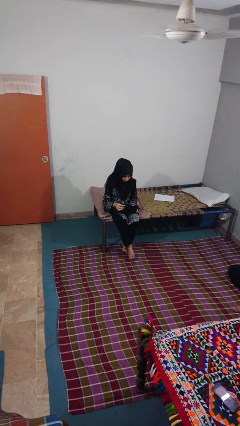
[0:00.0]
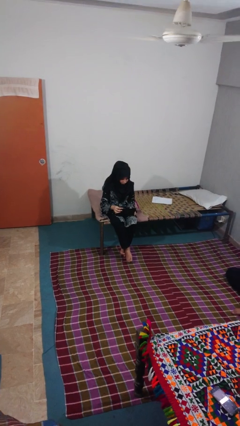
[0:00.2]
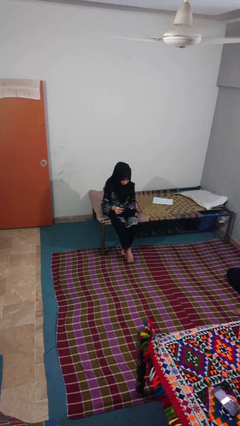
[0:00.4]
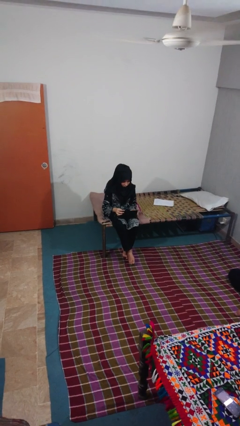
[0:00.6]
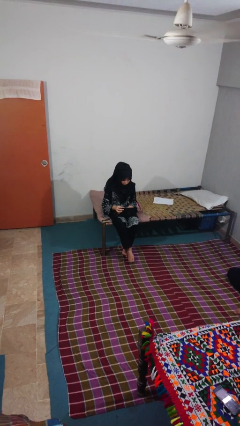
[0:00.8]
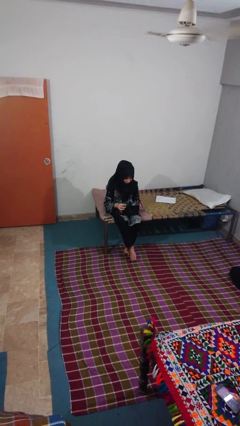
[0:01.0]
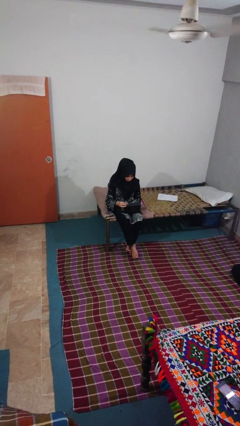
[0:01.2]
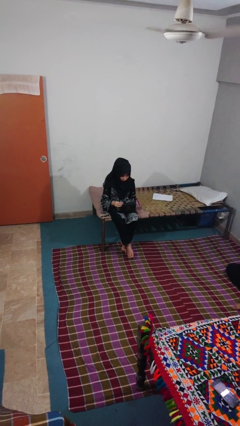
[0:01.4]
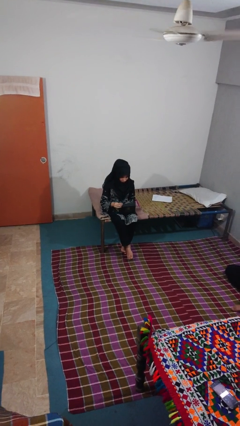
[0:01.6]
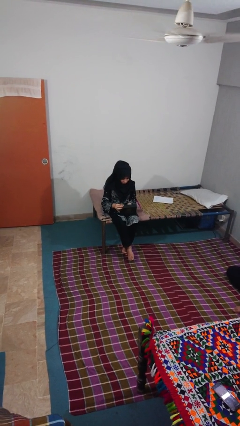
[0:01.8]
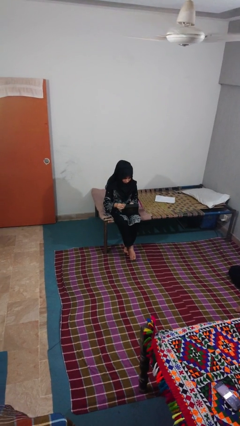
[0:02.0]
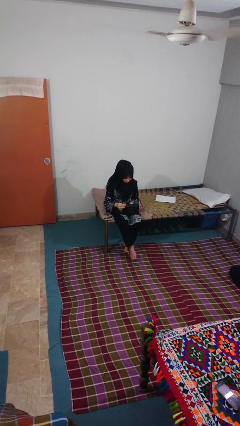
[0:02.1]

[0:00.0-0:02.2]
person searches jewelry box

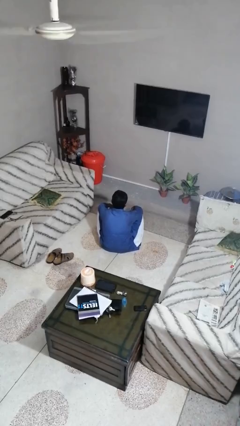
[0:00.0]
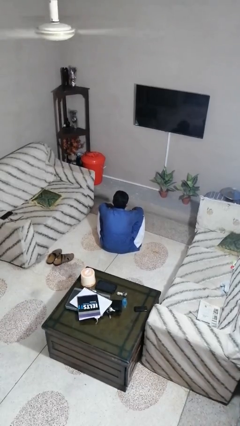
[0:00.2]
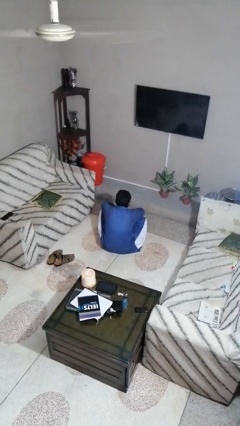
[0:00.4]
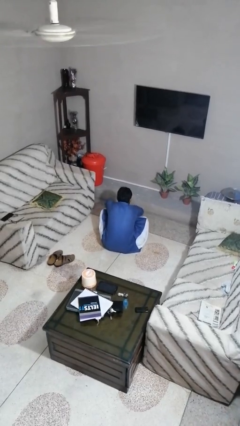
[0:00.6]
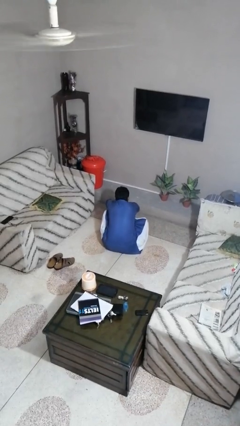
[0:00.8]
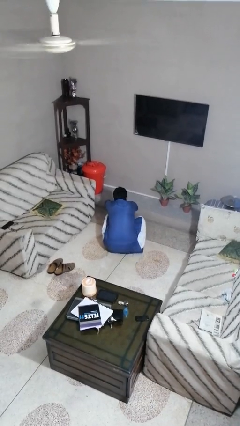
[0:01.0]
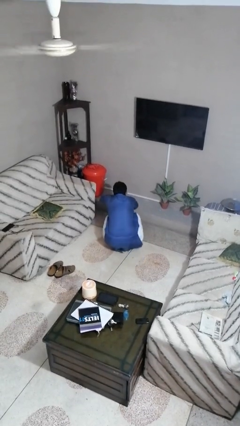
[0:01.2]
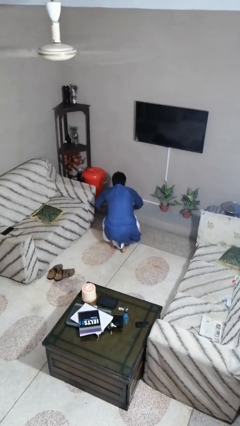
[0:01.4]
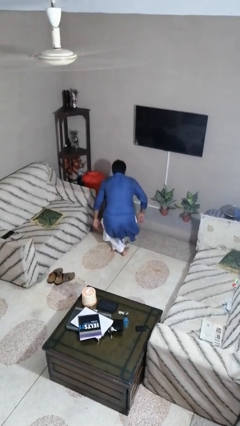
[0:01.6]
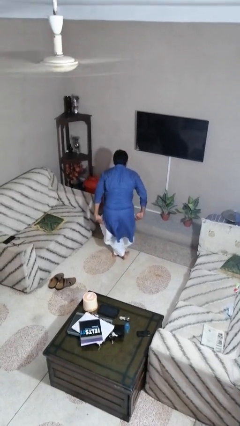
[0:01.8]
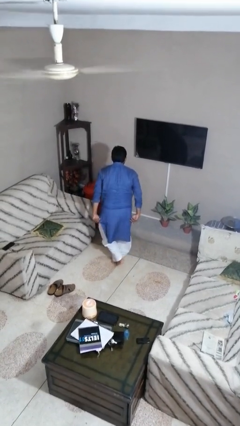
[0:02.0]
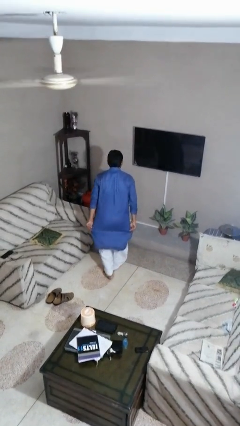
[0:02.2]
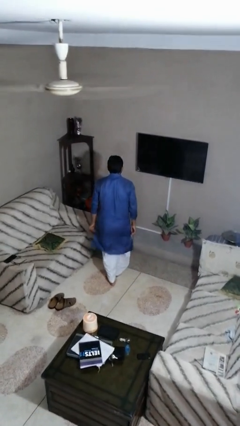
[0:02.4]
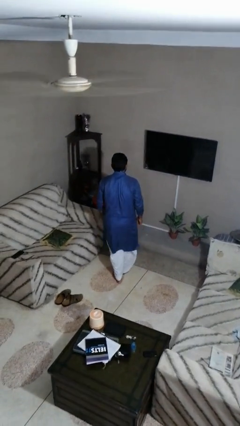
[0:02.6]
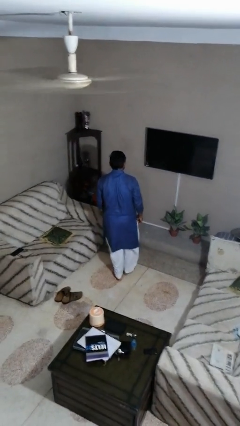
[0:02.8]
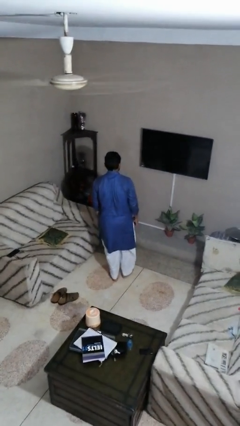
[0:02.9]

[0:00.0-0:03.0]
person stands up from floor

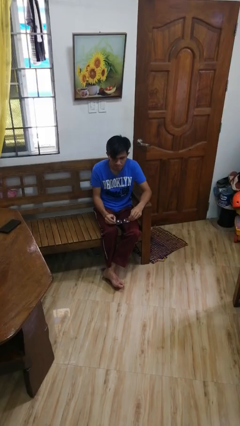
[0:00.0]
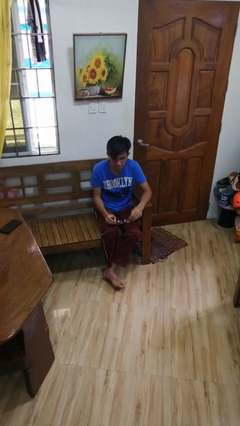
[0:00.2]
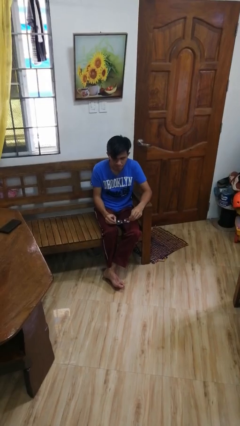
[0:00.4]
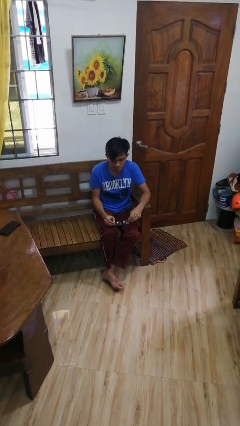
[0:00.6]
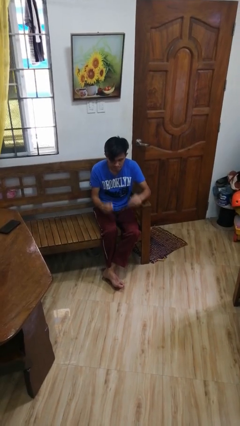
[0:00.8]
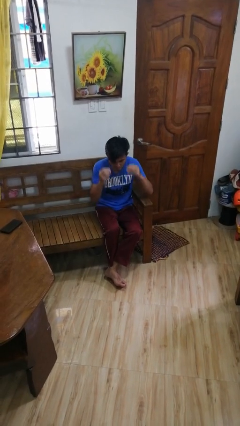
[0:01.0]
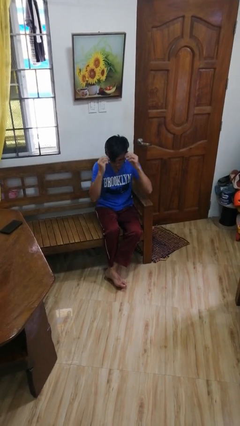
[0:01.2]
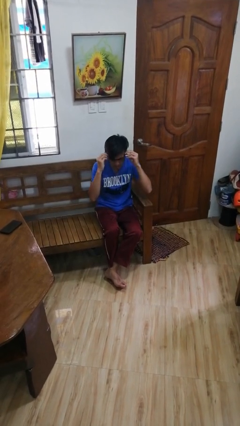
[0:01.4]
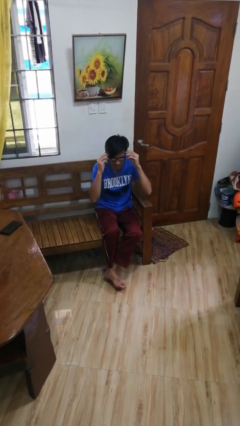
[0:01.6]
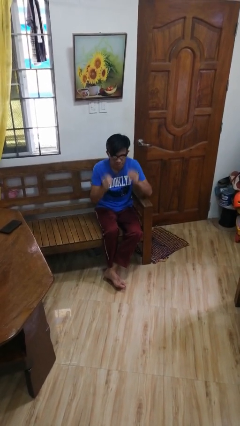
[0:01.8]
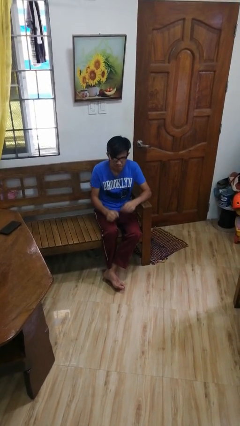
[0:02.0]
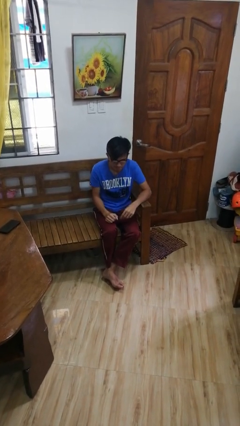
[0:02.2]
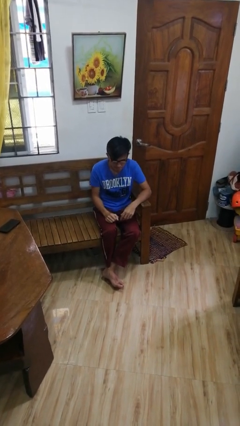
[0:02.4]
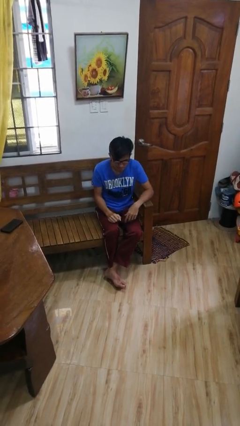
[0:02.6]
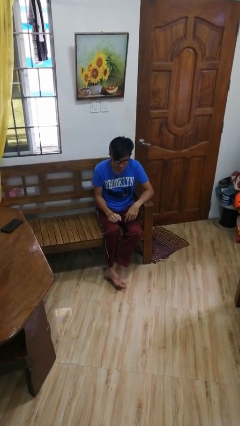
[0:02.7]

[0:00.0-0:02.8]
person puts on glasses

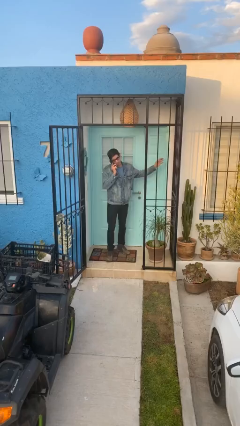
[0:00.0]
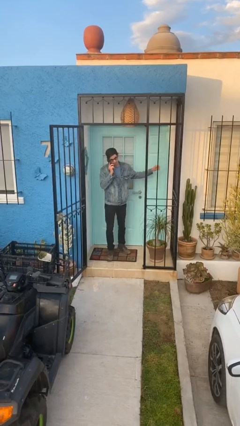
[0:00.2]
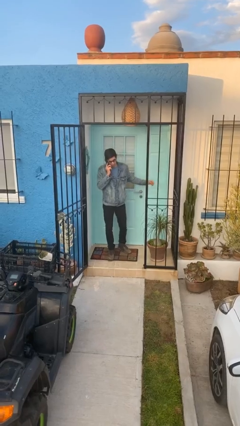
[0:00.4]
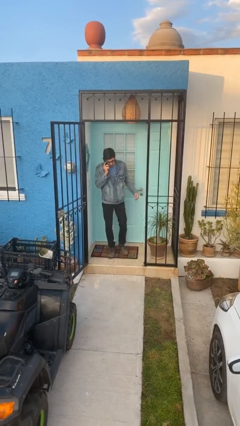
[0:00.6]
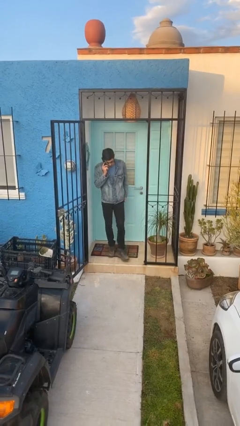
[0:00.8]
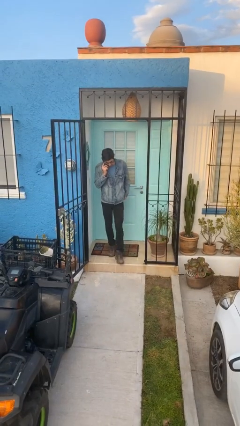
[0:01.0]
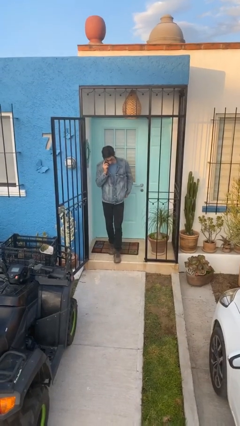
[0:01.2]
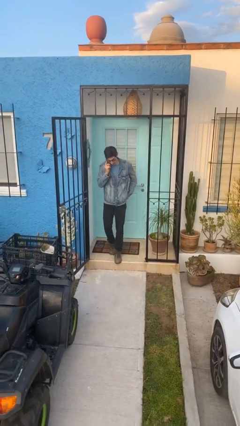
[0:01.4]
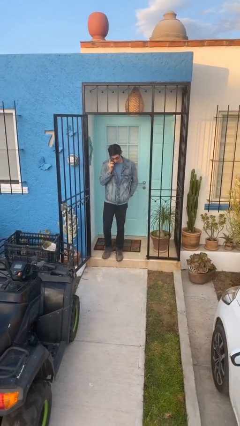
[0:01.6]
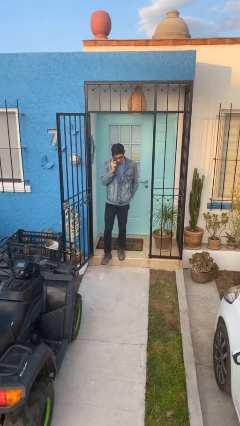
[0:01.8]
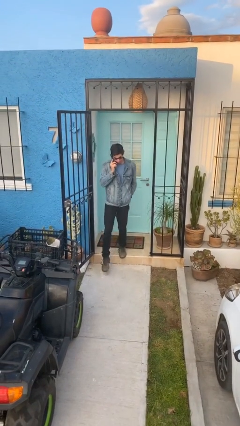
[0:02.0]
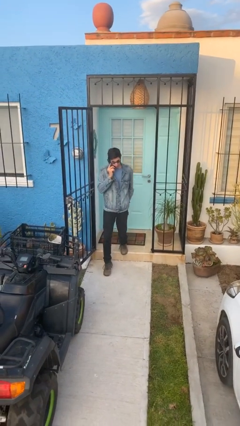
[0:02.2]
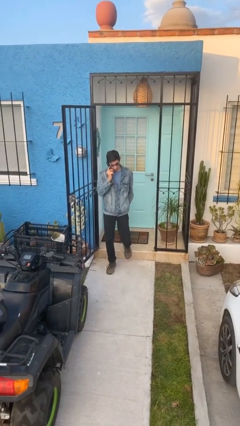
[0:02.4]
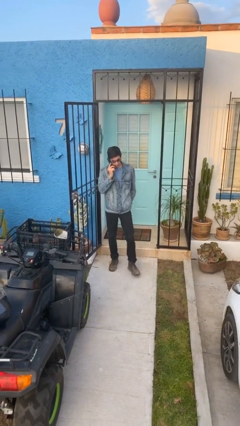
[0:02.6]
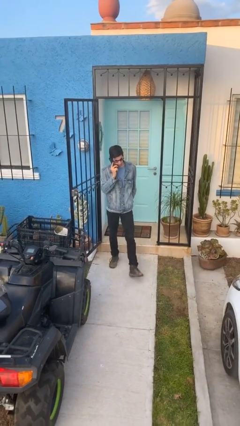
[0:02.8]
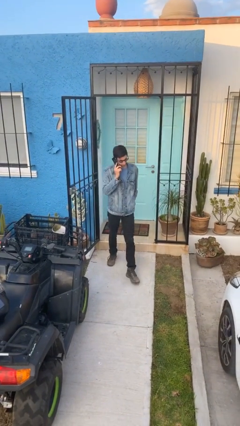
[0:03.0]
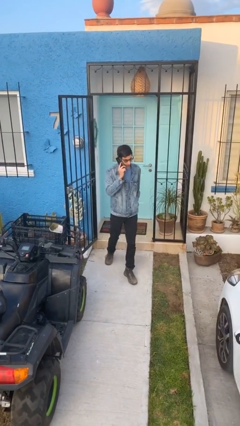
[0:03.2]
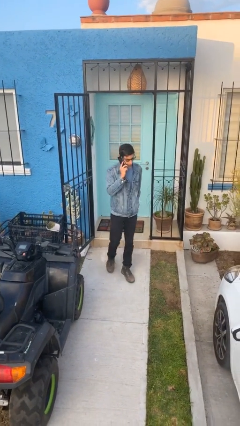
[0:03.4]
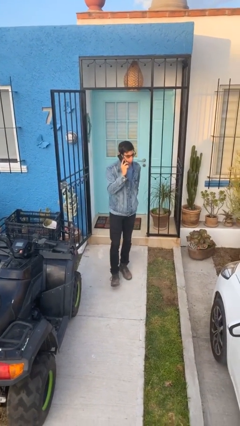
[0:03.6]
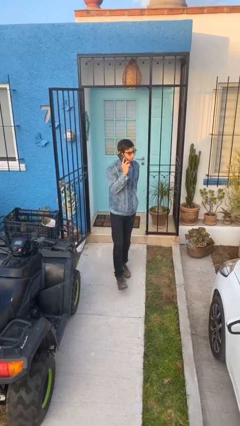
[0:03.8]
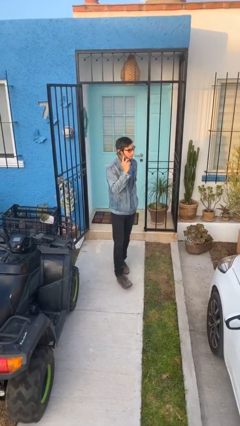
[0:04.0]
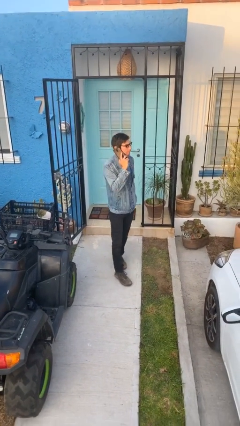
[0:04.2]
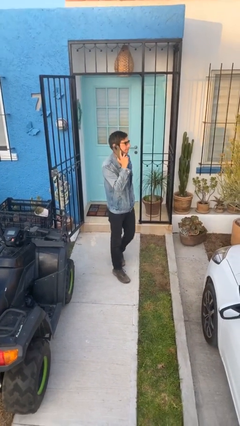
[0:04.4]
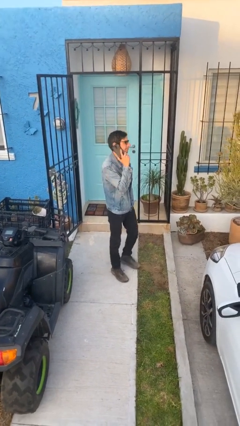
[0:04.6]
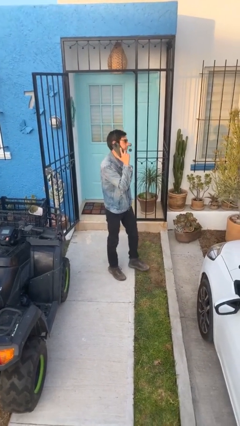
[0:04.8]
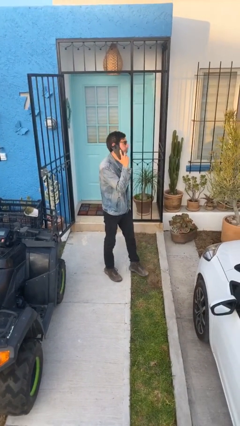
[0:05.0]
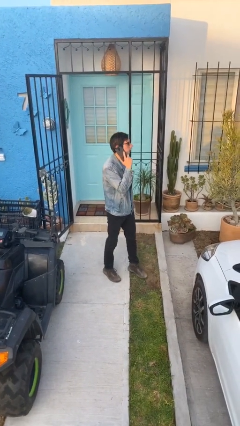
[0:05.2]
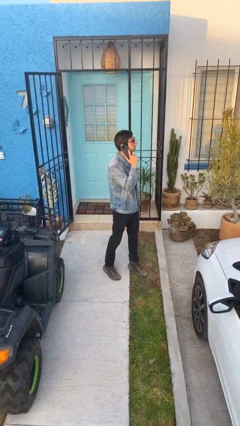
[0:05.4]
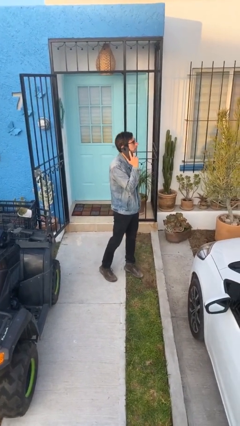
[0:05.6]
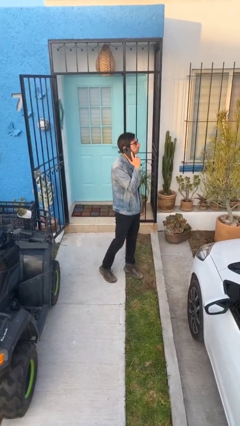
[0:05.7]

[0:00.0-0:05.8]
person enters scene through structure

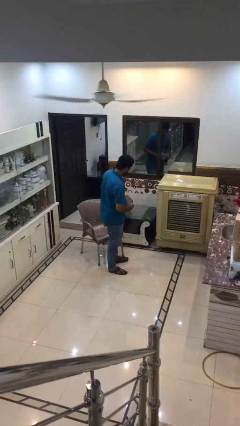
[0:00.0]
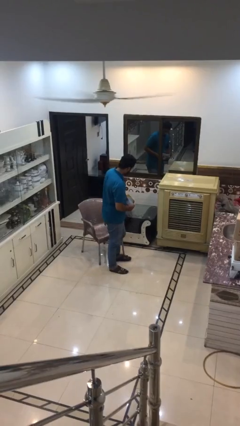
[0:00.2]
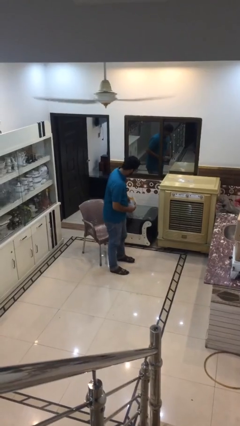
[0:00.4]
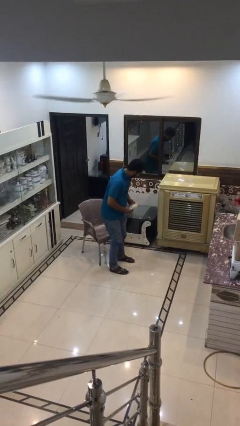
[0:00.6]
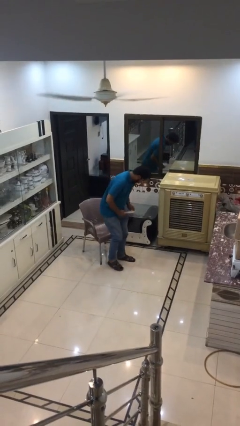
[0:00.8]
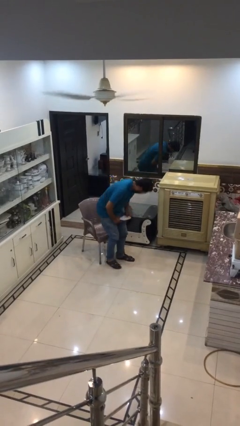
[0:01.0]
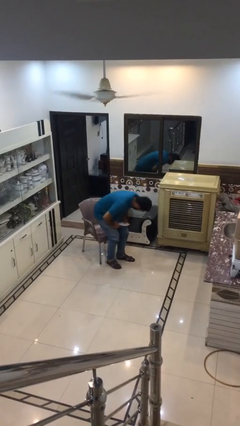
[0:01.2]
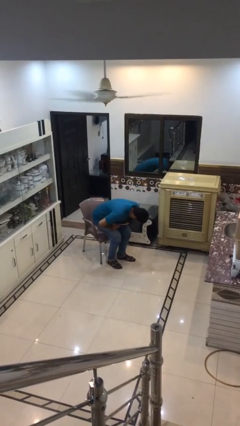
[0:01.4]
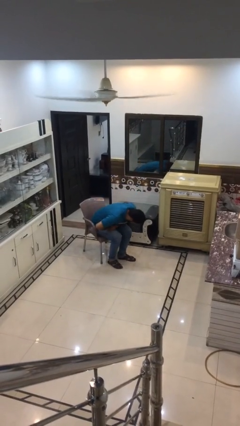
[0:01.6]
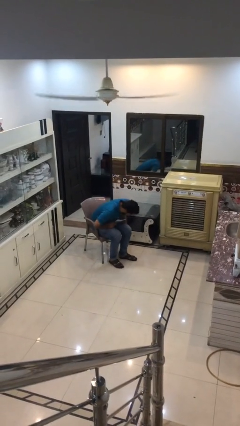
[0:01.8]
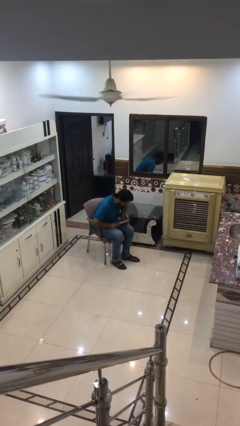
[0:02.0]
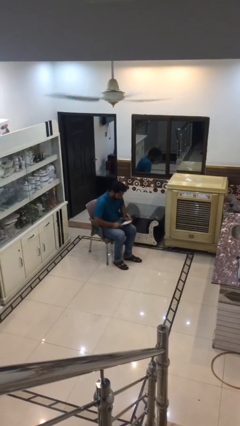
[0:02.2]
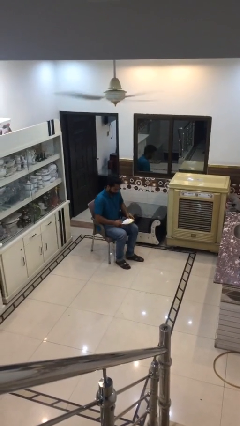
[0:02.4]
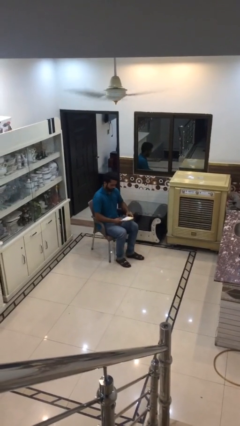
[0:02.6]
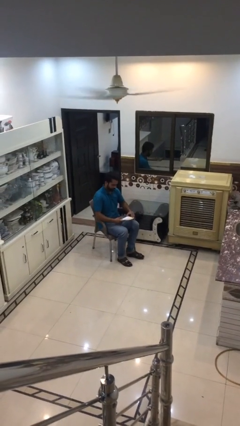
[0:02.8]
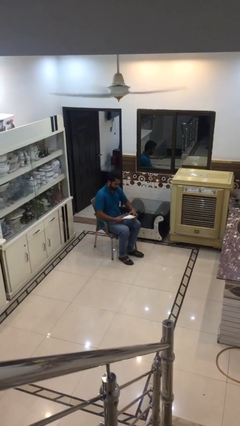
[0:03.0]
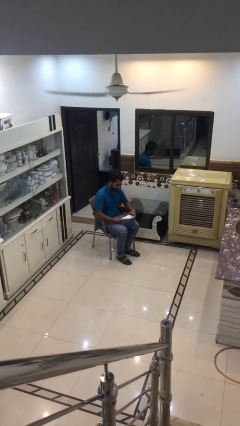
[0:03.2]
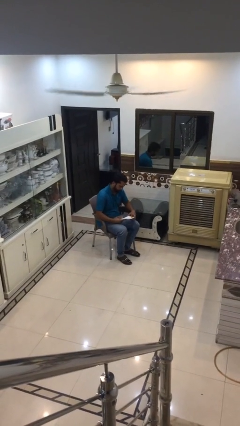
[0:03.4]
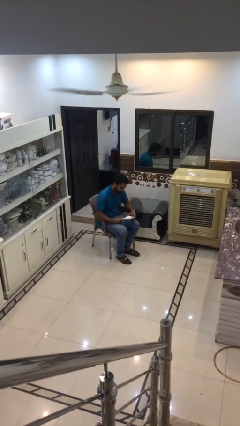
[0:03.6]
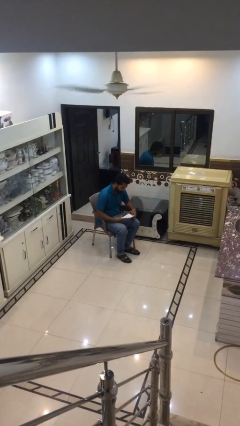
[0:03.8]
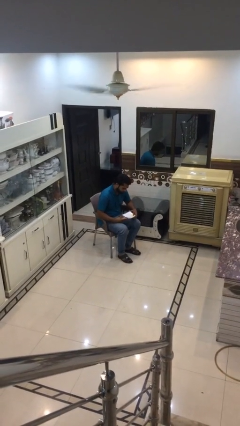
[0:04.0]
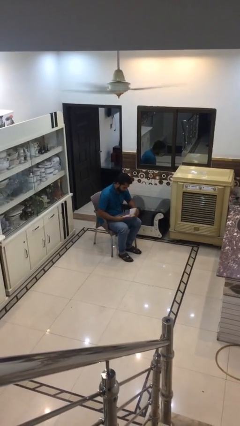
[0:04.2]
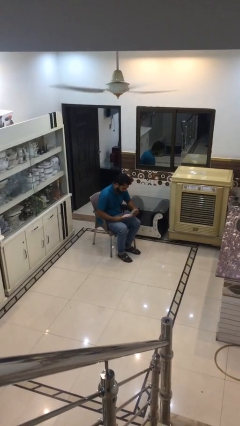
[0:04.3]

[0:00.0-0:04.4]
person sits down
